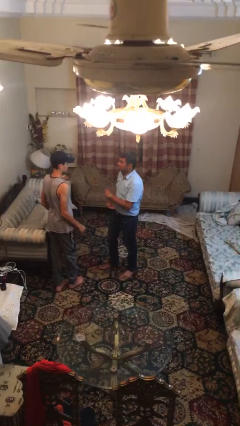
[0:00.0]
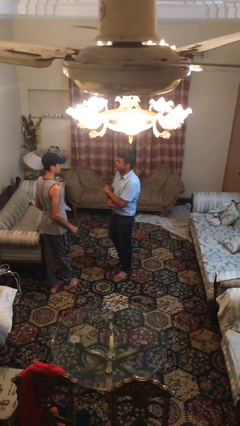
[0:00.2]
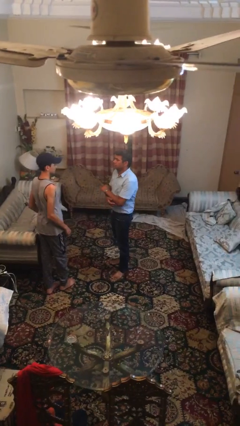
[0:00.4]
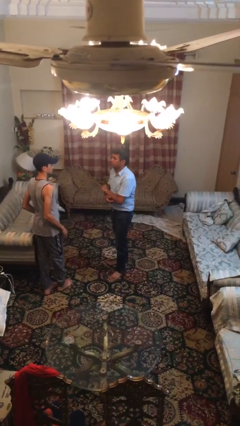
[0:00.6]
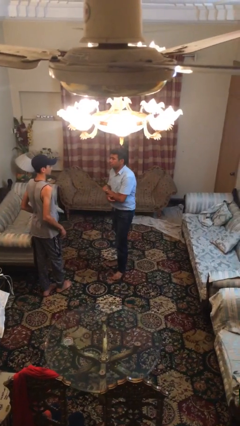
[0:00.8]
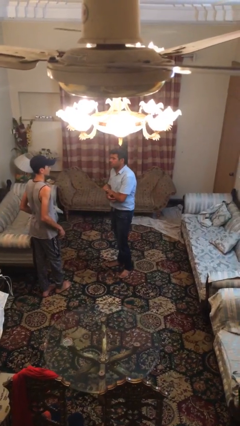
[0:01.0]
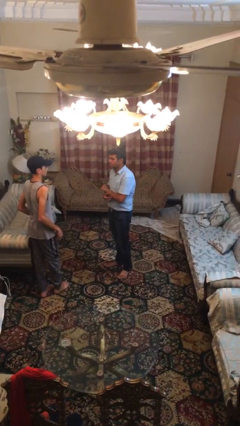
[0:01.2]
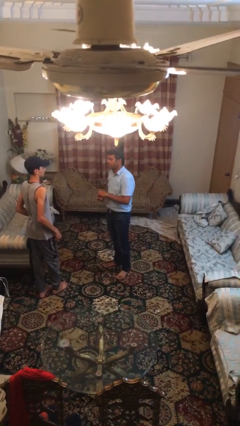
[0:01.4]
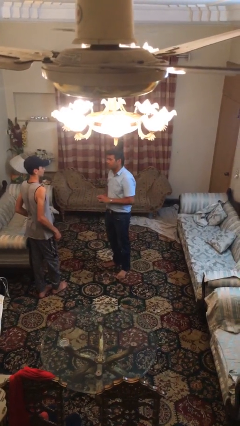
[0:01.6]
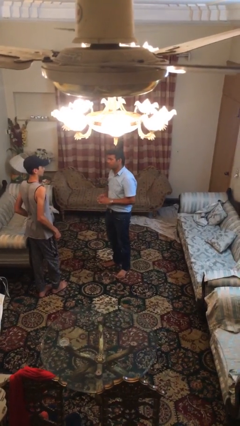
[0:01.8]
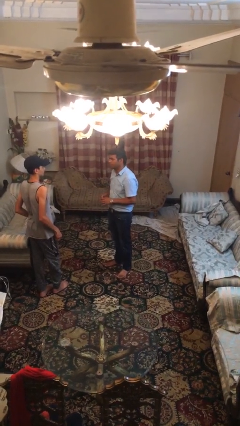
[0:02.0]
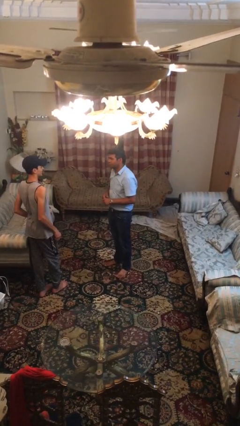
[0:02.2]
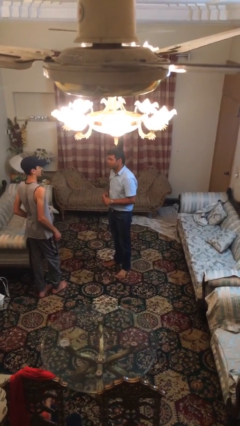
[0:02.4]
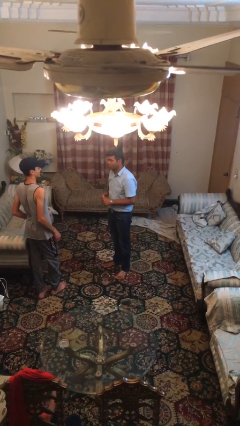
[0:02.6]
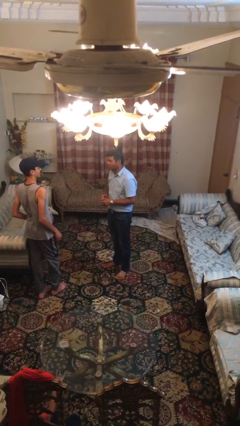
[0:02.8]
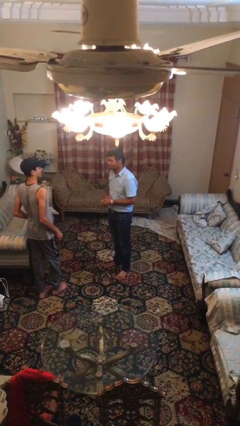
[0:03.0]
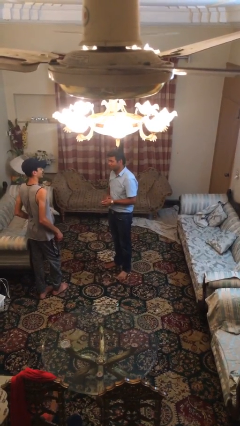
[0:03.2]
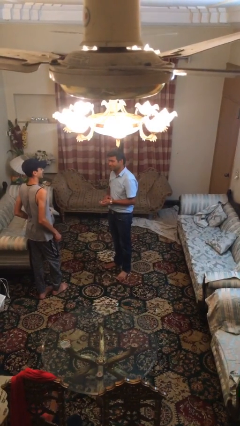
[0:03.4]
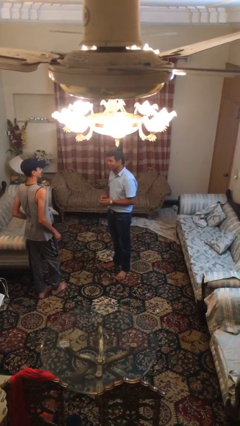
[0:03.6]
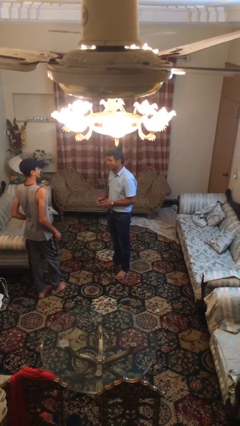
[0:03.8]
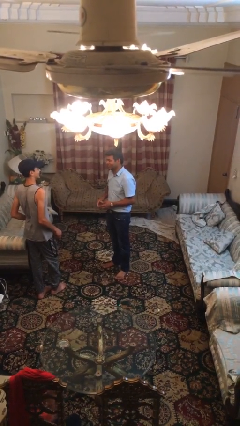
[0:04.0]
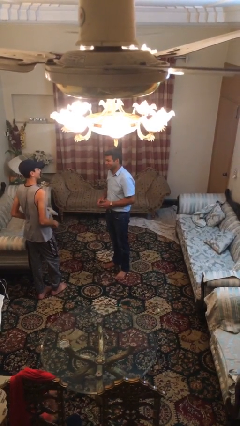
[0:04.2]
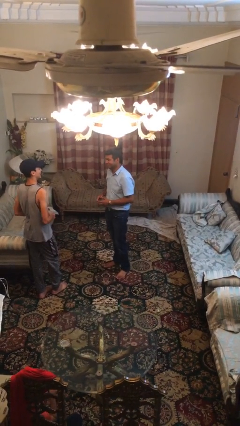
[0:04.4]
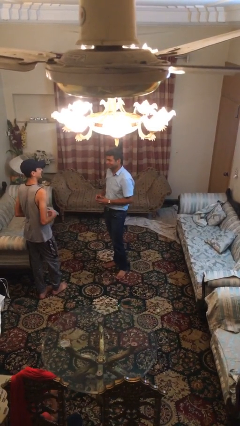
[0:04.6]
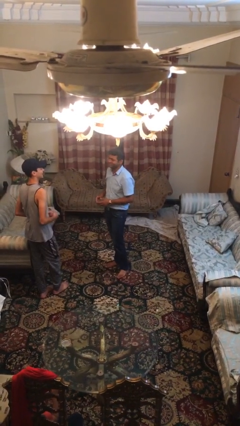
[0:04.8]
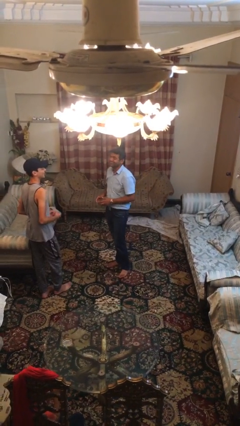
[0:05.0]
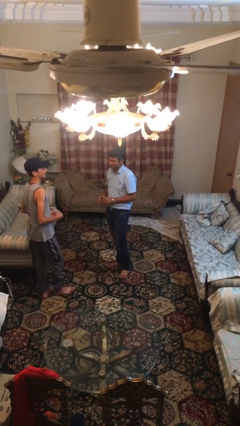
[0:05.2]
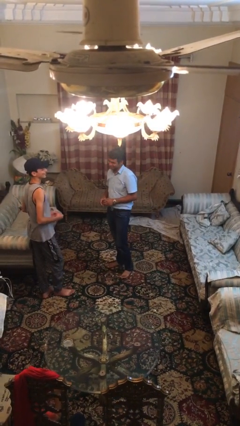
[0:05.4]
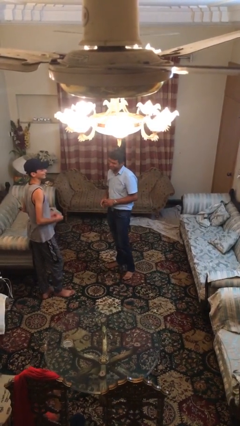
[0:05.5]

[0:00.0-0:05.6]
person talks to person

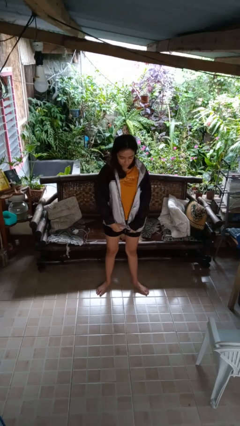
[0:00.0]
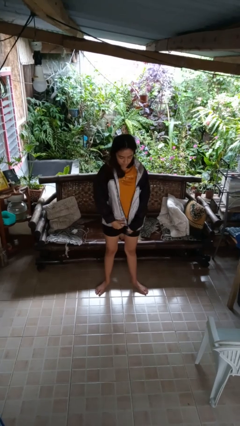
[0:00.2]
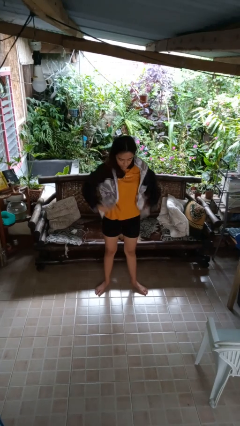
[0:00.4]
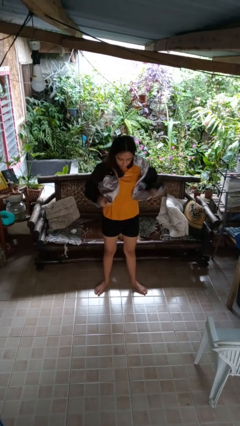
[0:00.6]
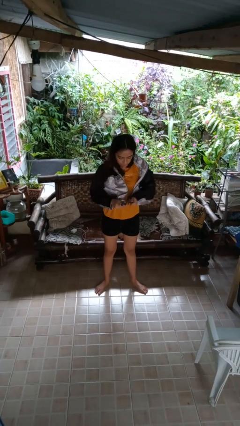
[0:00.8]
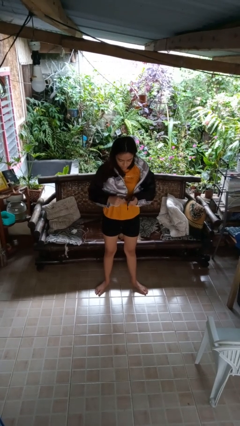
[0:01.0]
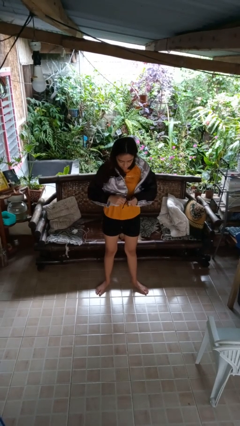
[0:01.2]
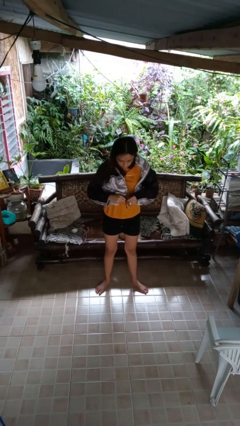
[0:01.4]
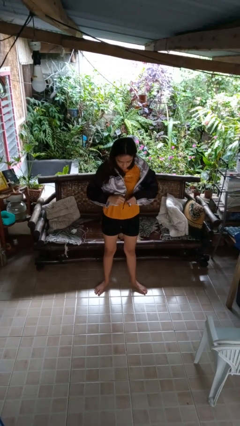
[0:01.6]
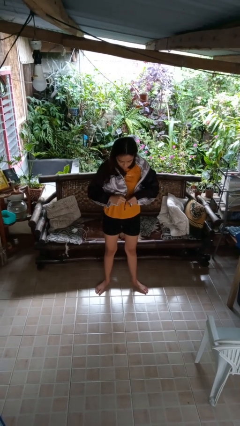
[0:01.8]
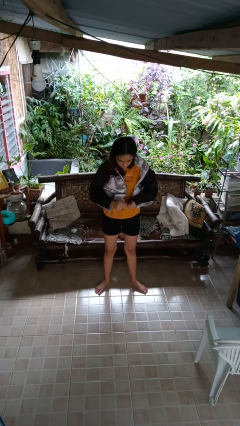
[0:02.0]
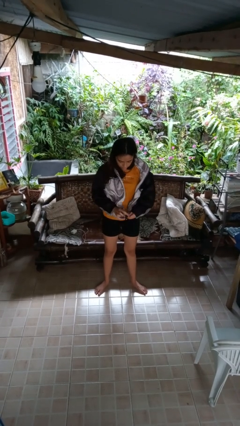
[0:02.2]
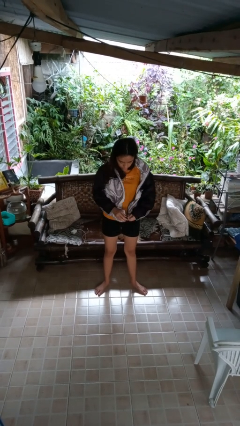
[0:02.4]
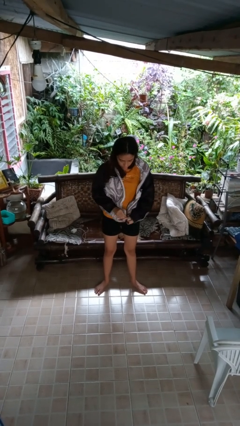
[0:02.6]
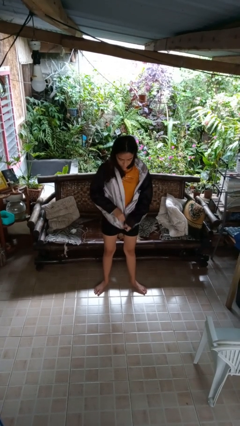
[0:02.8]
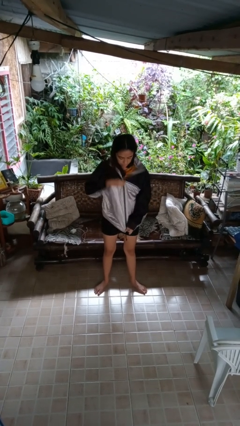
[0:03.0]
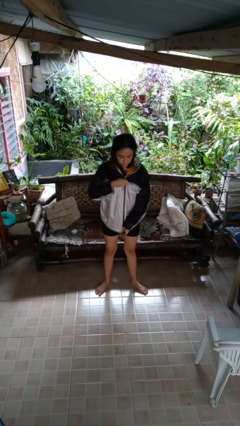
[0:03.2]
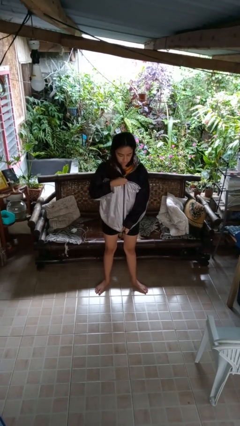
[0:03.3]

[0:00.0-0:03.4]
person zips up jacket

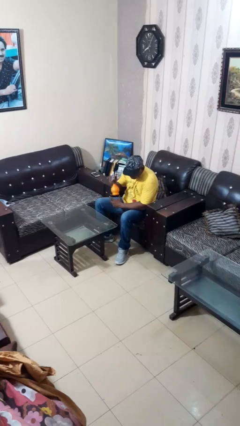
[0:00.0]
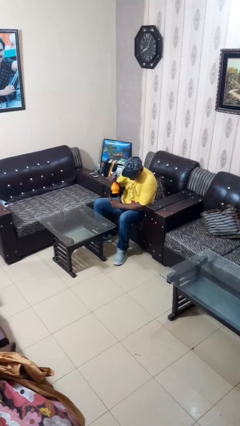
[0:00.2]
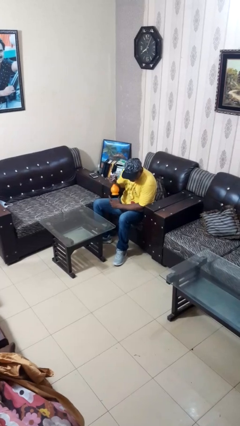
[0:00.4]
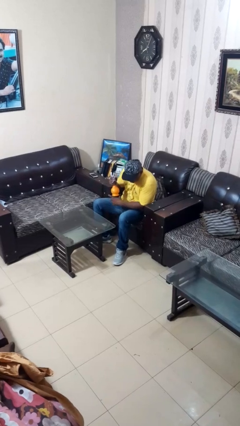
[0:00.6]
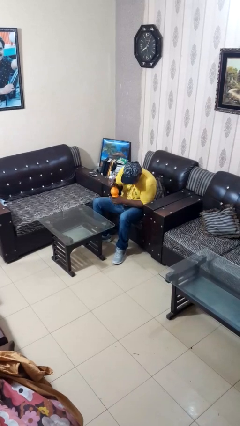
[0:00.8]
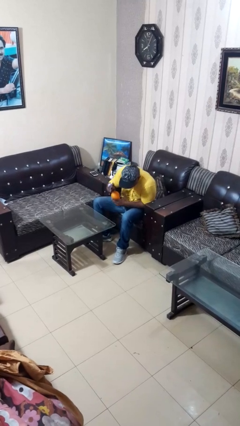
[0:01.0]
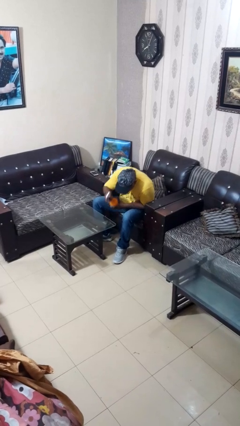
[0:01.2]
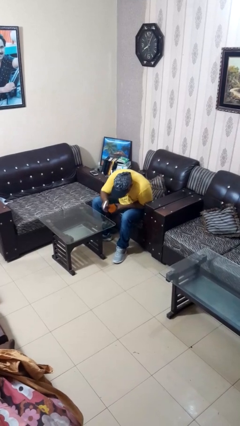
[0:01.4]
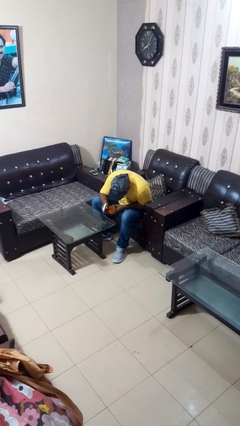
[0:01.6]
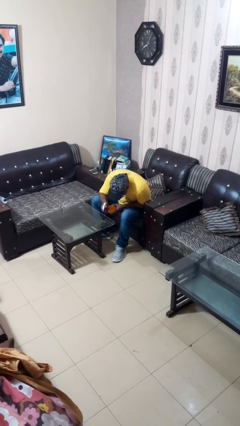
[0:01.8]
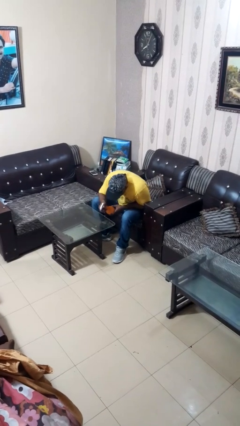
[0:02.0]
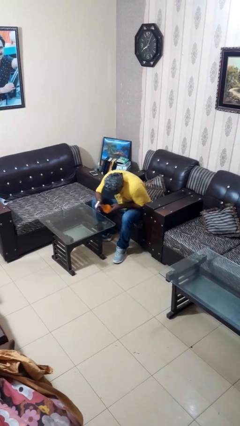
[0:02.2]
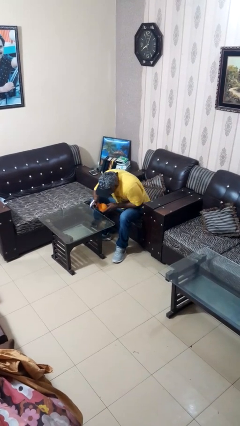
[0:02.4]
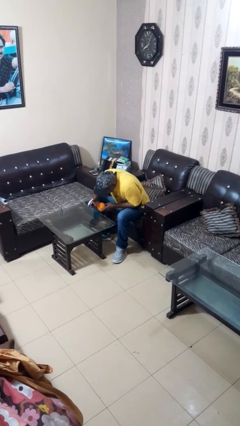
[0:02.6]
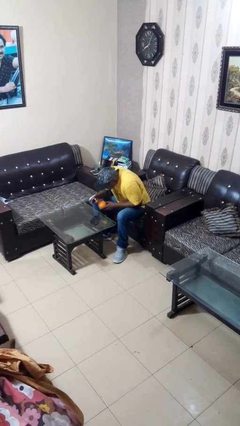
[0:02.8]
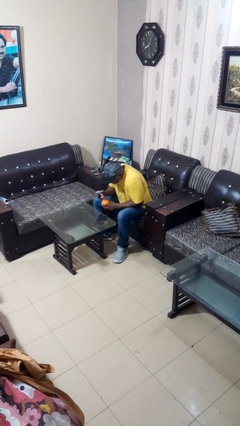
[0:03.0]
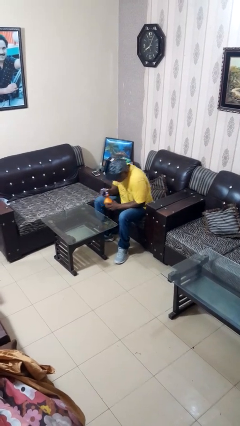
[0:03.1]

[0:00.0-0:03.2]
person sprays from bottle

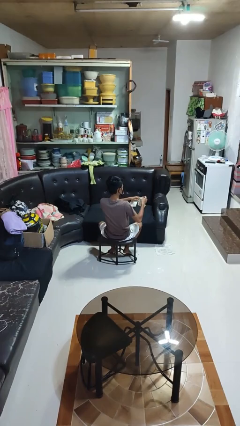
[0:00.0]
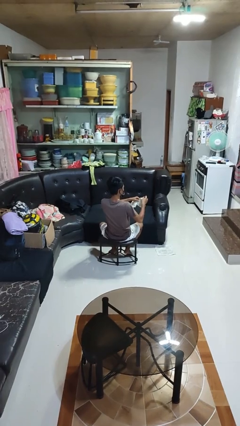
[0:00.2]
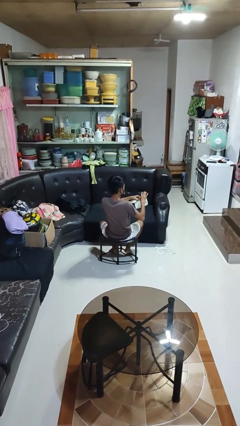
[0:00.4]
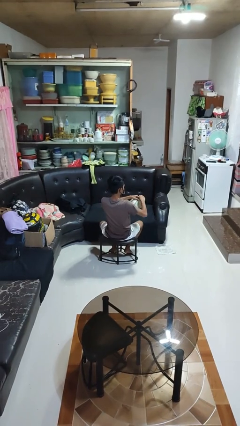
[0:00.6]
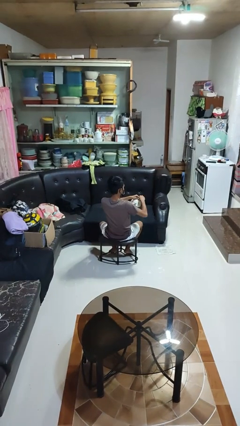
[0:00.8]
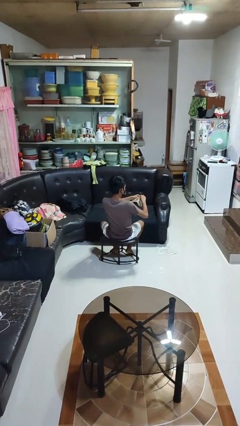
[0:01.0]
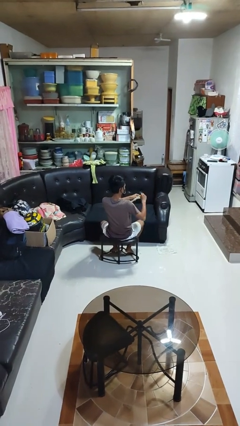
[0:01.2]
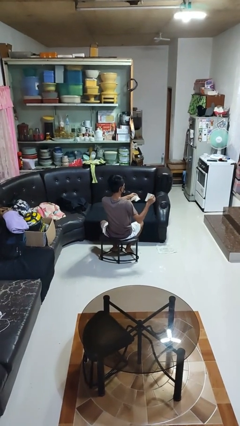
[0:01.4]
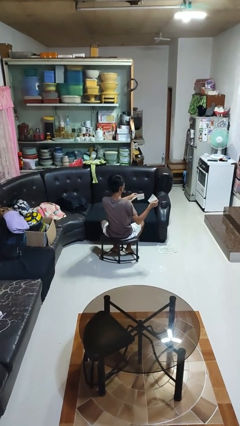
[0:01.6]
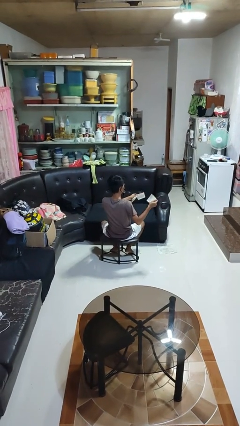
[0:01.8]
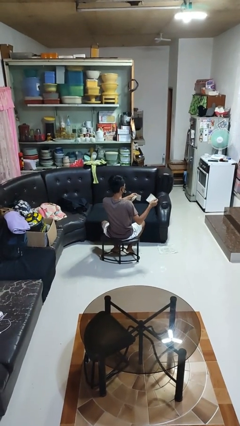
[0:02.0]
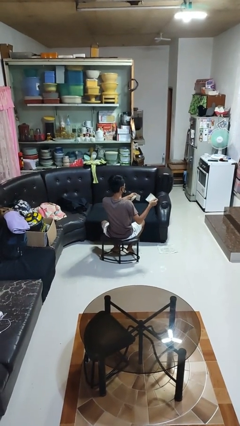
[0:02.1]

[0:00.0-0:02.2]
person tears paper

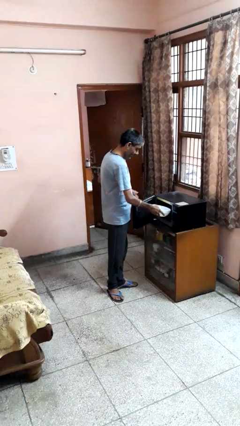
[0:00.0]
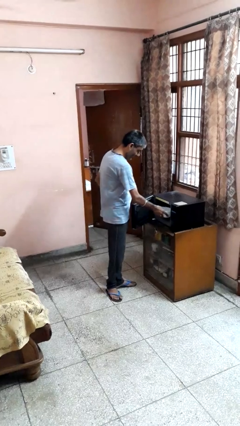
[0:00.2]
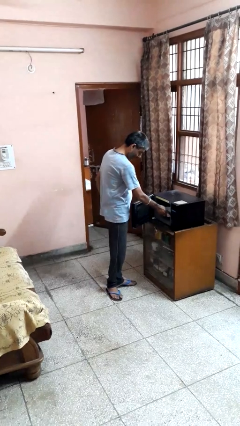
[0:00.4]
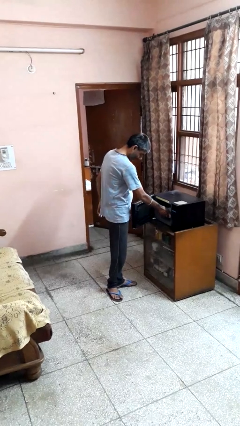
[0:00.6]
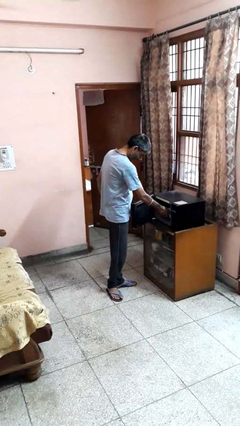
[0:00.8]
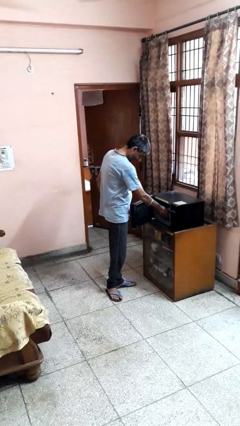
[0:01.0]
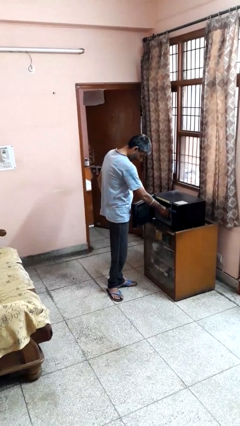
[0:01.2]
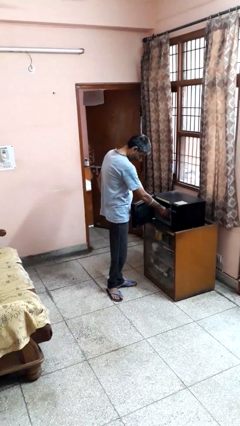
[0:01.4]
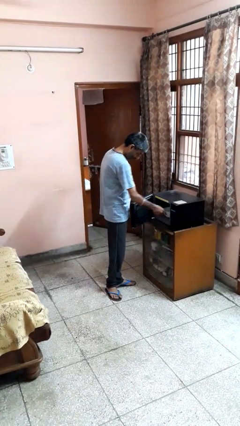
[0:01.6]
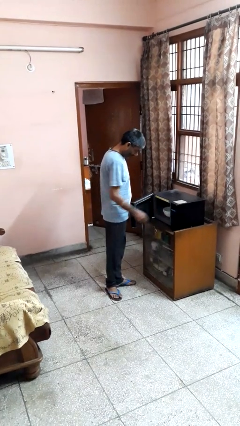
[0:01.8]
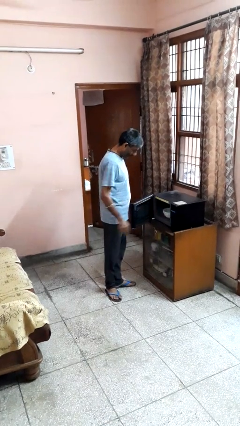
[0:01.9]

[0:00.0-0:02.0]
person puts object into microwave

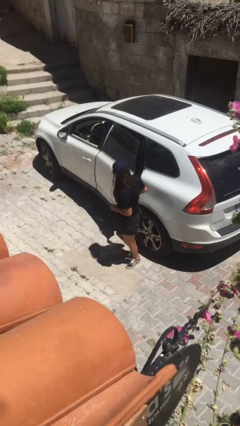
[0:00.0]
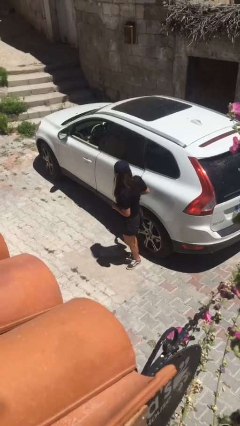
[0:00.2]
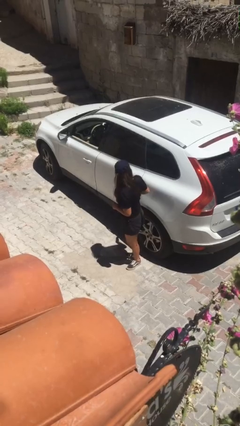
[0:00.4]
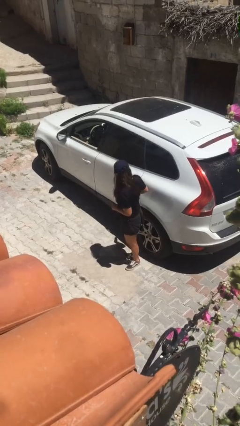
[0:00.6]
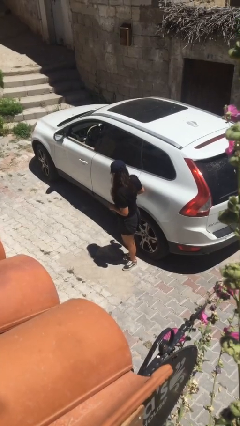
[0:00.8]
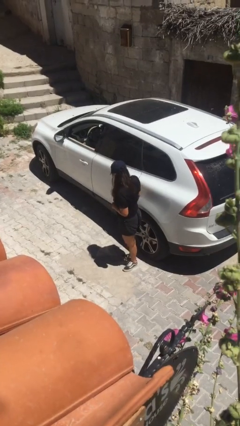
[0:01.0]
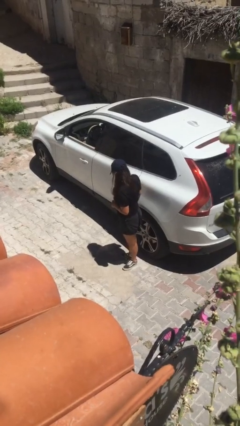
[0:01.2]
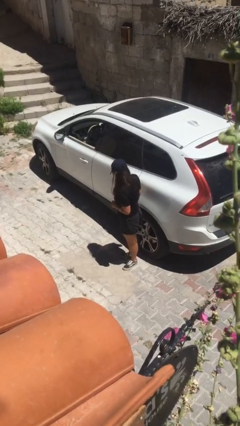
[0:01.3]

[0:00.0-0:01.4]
person closes car door
